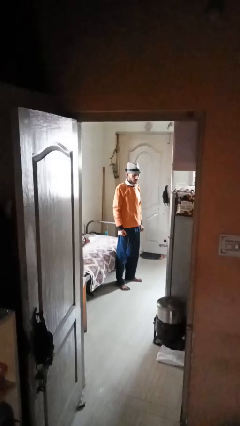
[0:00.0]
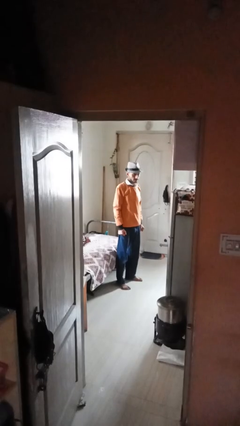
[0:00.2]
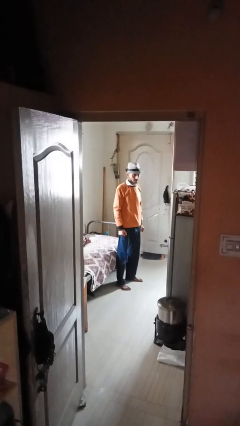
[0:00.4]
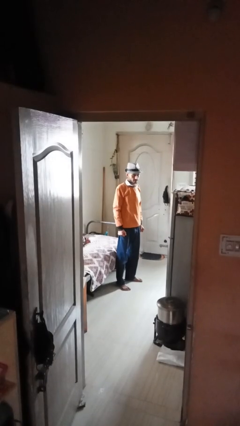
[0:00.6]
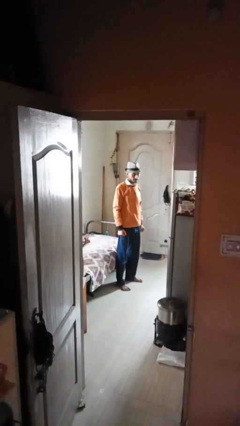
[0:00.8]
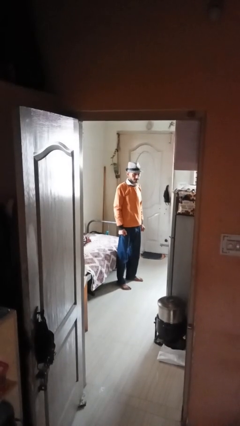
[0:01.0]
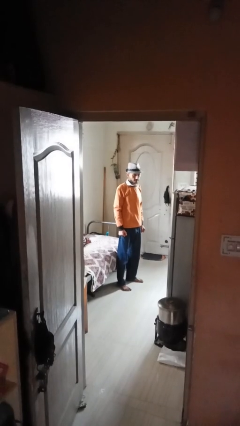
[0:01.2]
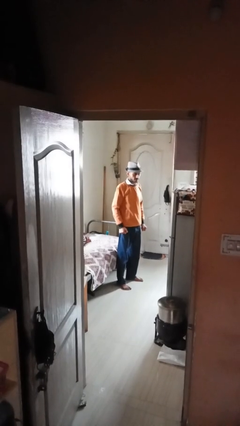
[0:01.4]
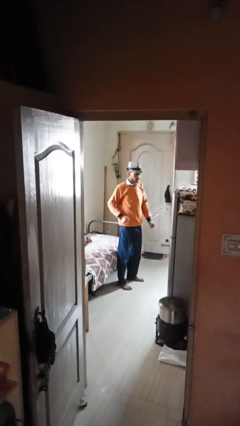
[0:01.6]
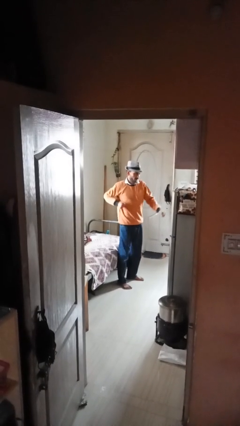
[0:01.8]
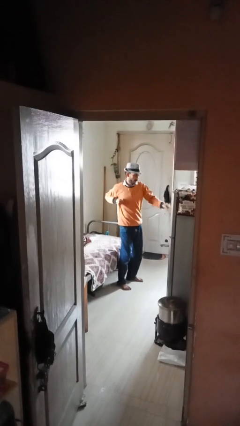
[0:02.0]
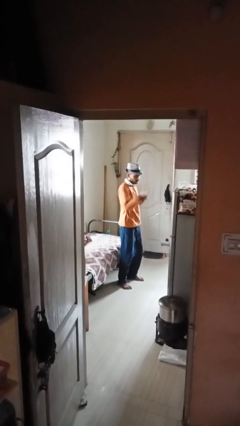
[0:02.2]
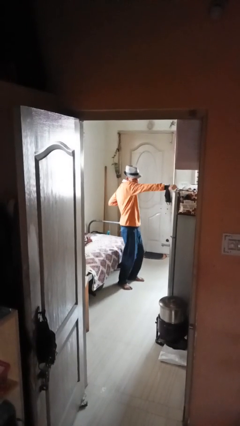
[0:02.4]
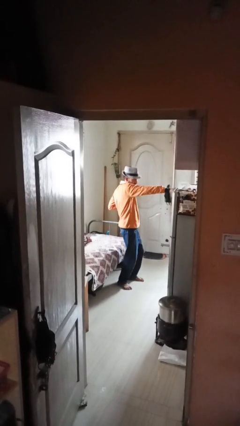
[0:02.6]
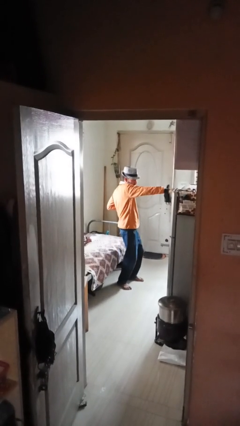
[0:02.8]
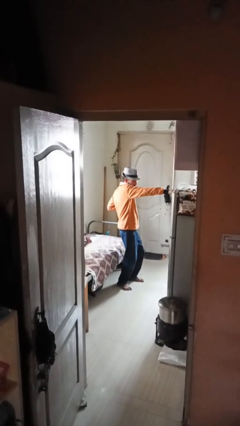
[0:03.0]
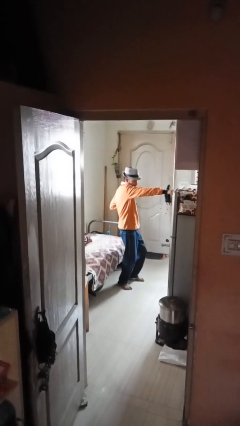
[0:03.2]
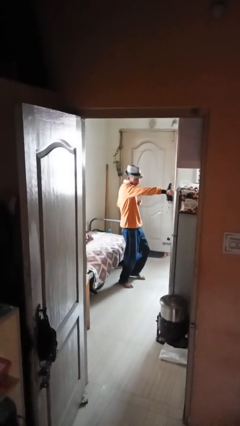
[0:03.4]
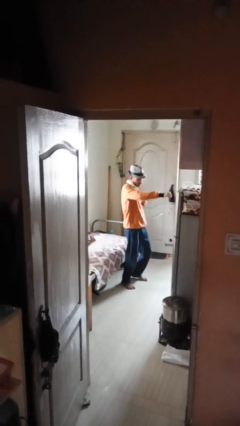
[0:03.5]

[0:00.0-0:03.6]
person punches

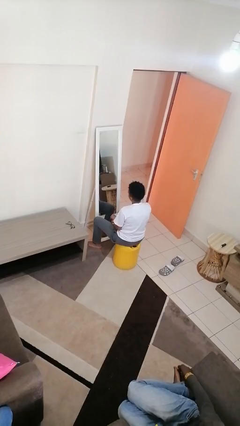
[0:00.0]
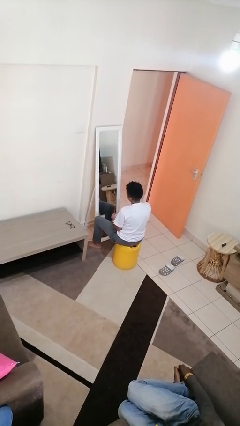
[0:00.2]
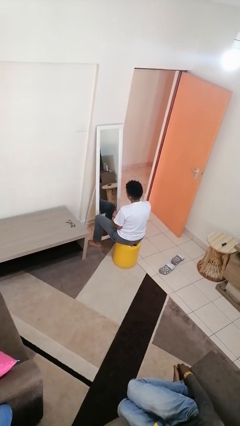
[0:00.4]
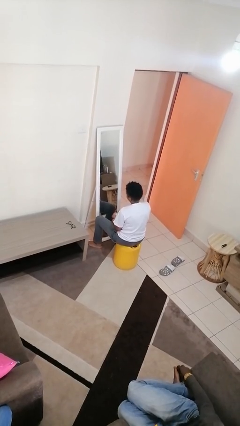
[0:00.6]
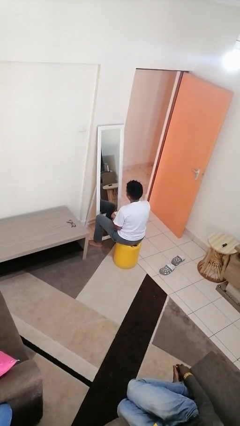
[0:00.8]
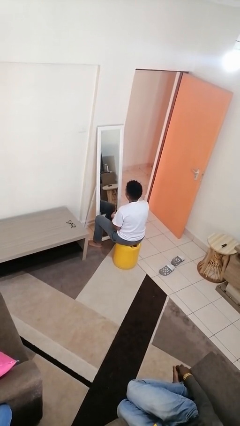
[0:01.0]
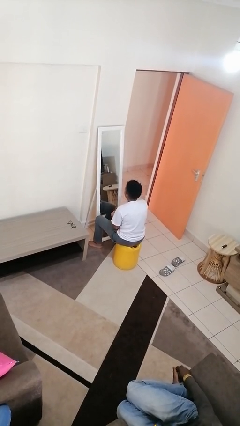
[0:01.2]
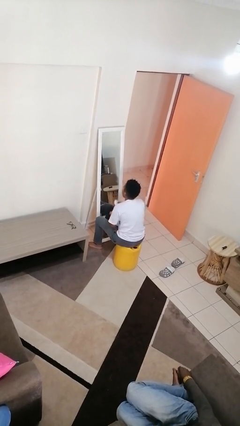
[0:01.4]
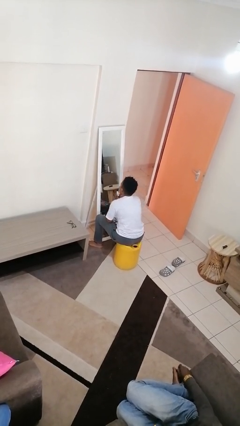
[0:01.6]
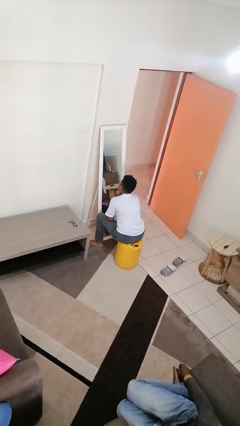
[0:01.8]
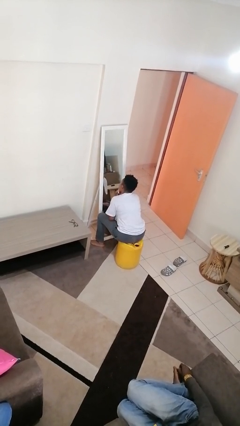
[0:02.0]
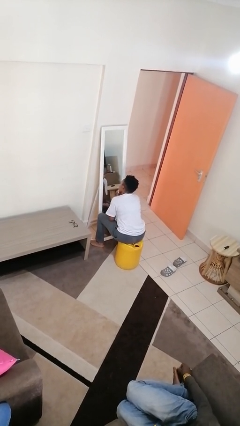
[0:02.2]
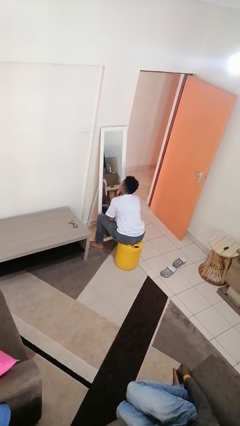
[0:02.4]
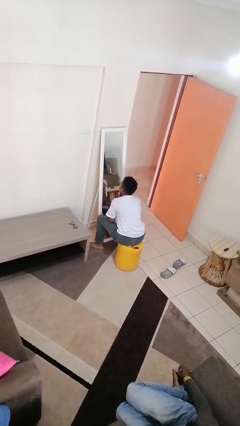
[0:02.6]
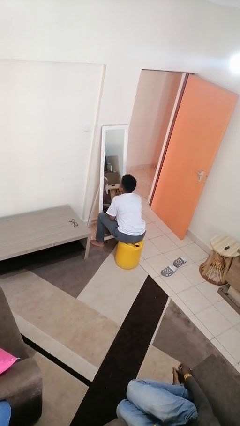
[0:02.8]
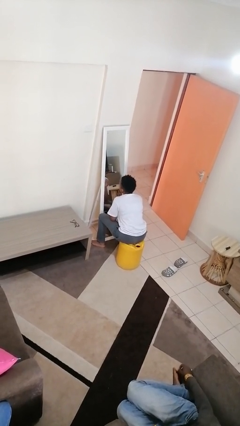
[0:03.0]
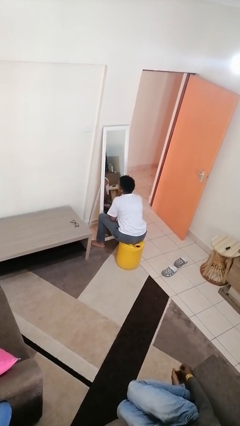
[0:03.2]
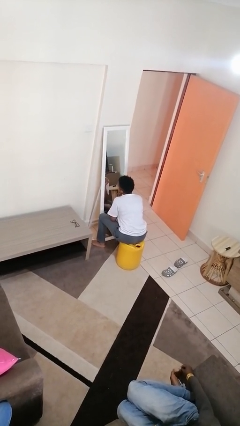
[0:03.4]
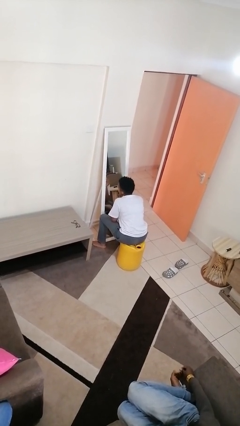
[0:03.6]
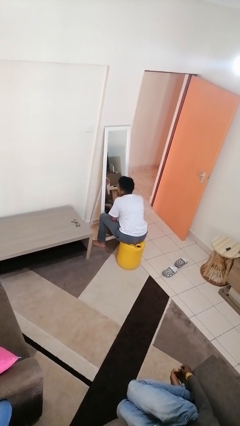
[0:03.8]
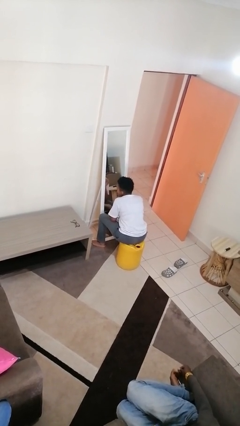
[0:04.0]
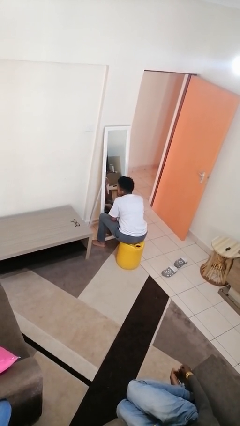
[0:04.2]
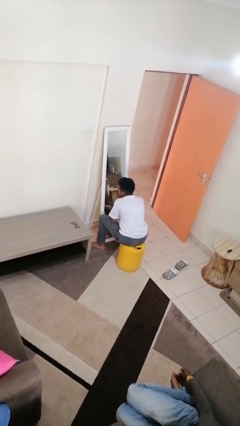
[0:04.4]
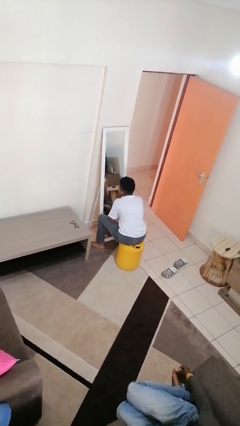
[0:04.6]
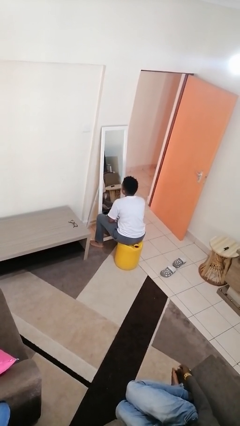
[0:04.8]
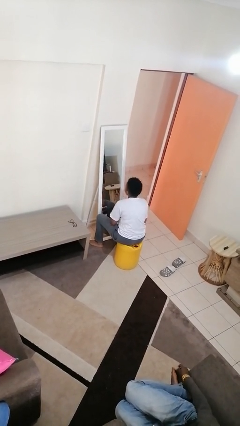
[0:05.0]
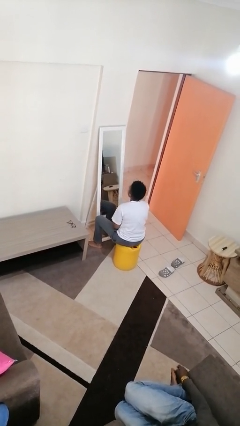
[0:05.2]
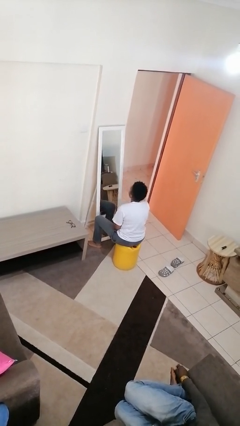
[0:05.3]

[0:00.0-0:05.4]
person applies foundation makeup

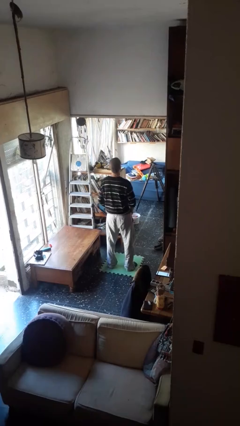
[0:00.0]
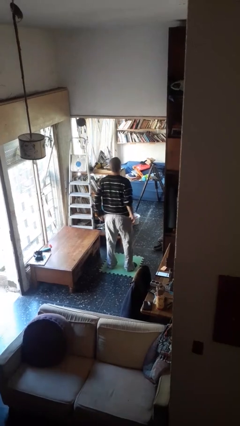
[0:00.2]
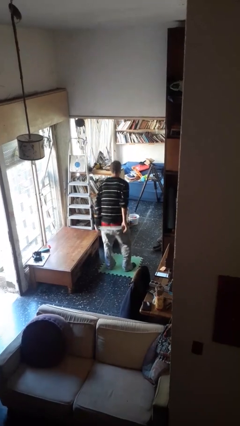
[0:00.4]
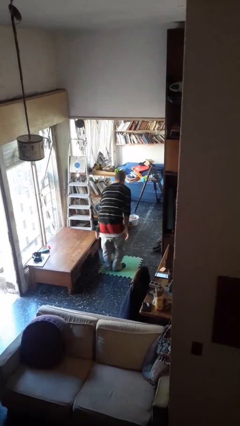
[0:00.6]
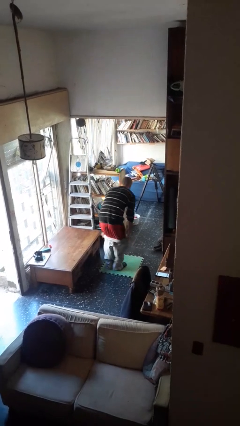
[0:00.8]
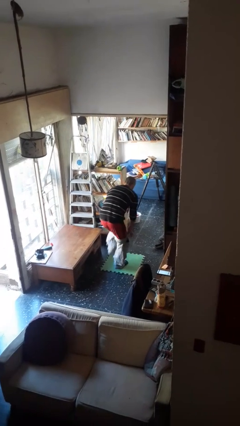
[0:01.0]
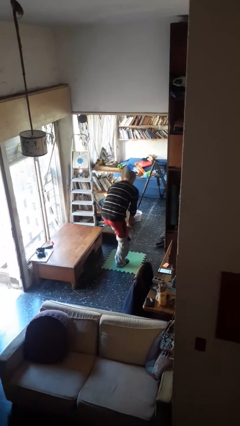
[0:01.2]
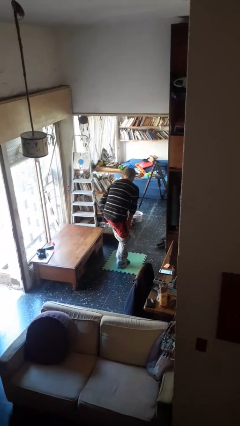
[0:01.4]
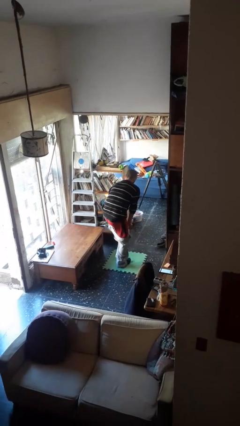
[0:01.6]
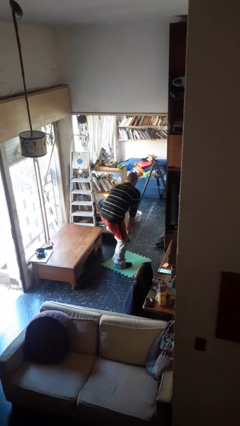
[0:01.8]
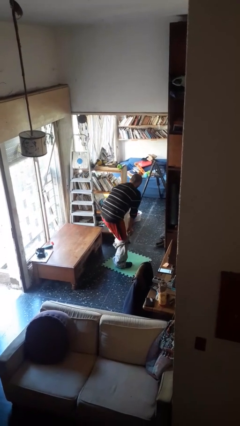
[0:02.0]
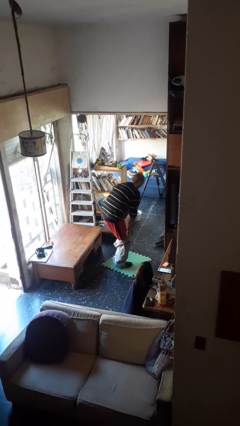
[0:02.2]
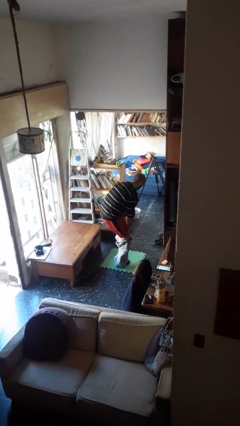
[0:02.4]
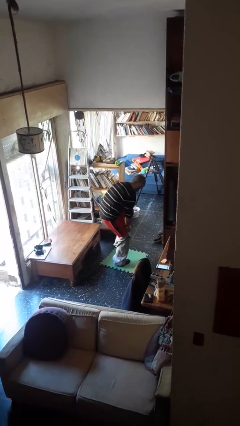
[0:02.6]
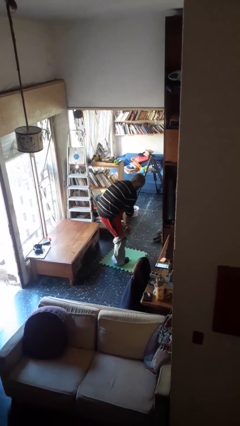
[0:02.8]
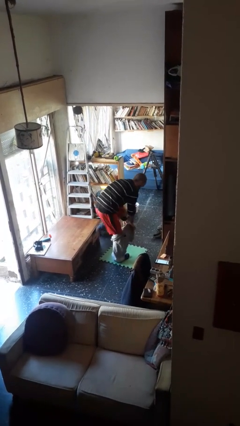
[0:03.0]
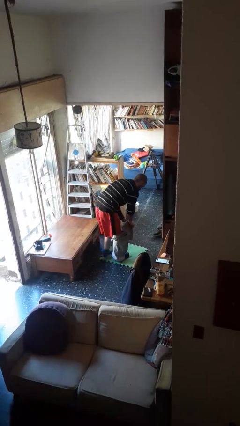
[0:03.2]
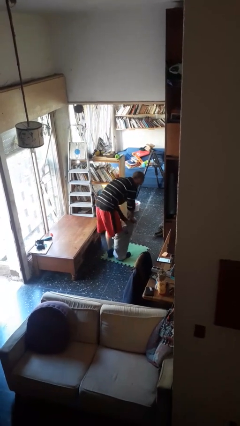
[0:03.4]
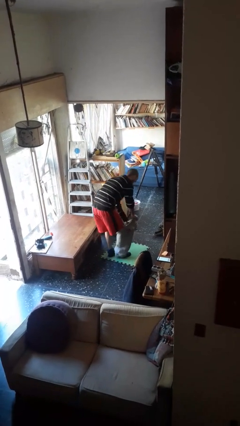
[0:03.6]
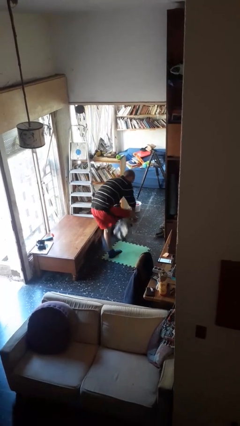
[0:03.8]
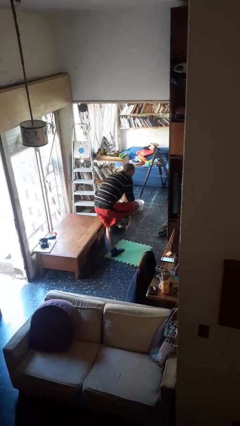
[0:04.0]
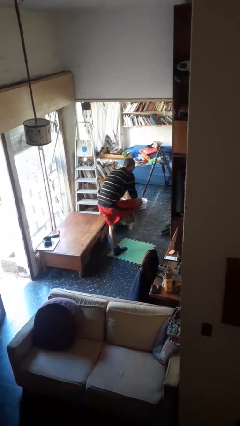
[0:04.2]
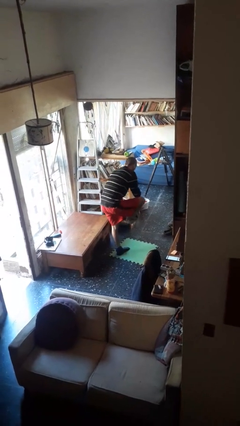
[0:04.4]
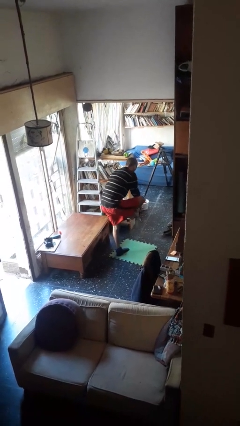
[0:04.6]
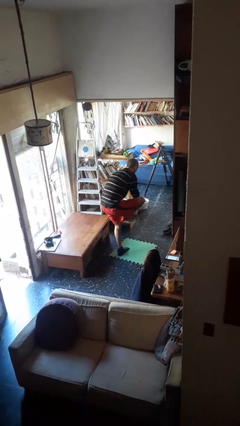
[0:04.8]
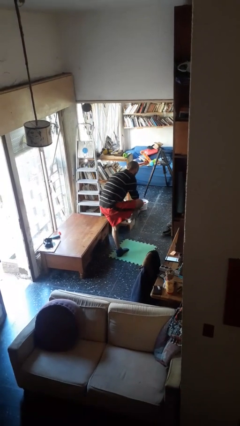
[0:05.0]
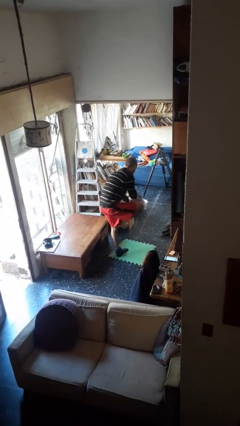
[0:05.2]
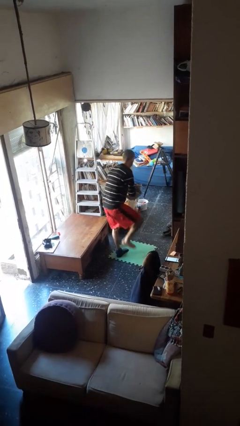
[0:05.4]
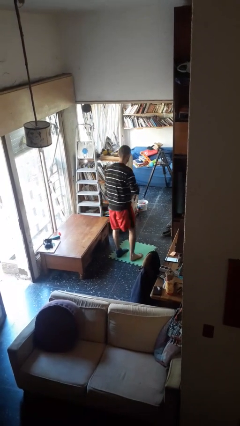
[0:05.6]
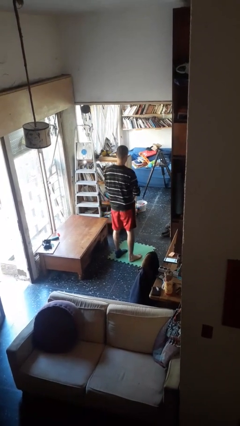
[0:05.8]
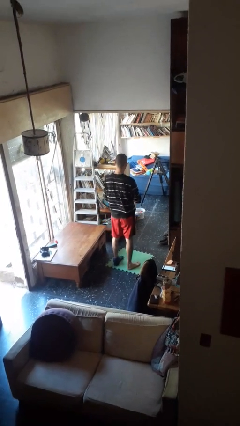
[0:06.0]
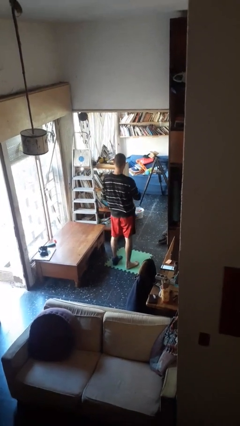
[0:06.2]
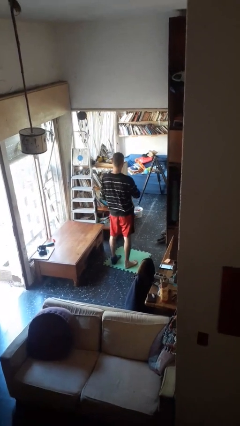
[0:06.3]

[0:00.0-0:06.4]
person takes off pants

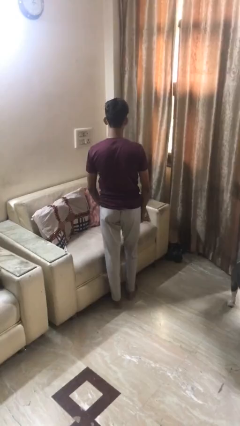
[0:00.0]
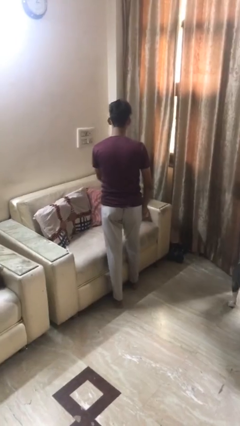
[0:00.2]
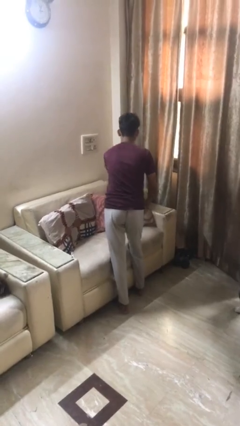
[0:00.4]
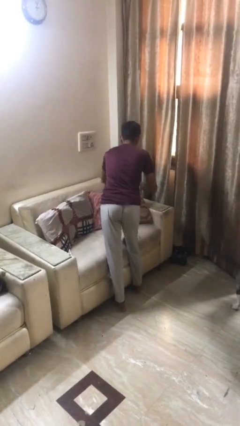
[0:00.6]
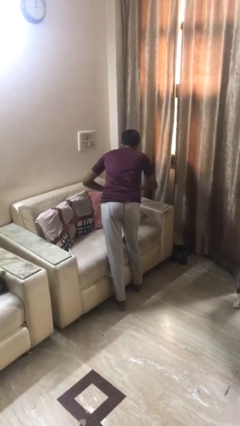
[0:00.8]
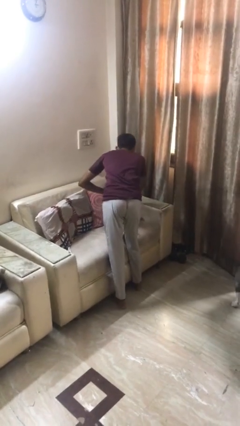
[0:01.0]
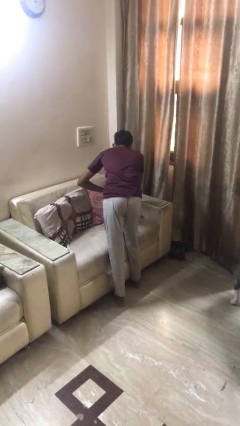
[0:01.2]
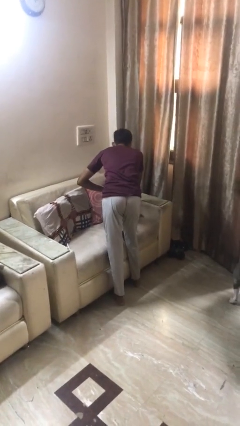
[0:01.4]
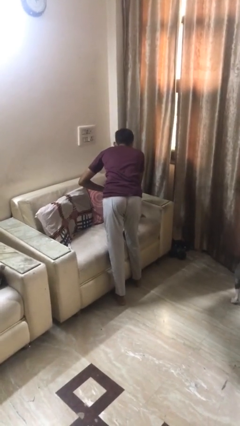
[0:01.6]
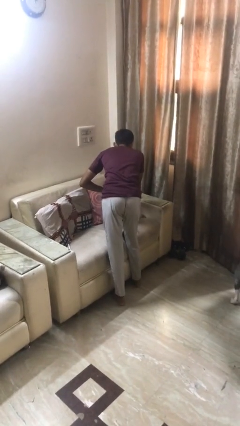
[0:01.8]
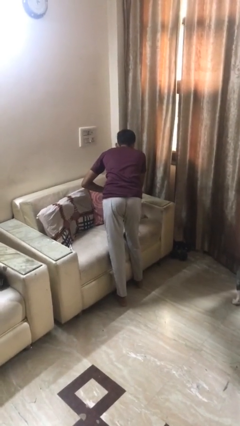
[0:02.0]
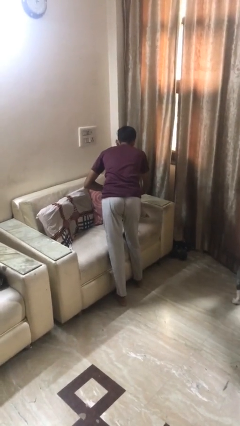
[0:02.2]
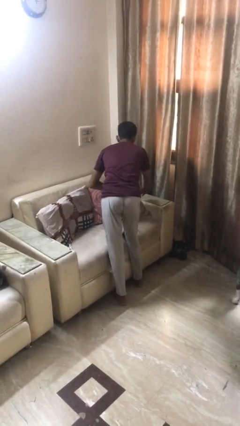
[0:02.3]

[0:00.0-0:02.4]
person searches in couch
